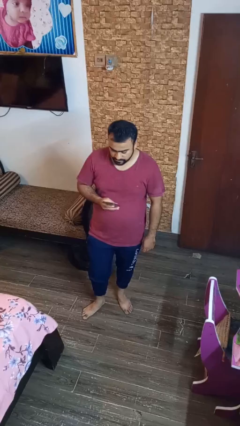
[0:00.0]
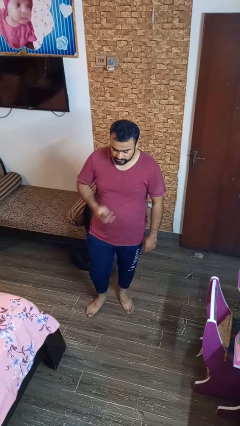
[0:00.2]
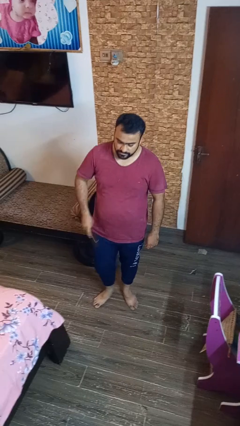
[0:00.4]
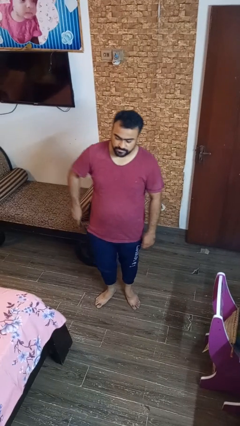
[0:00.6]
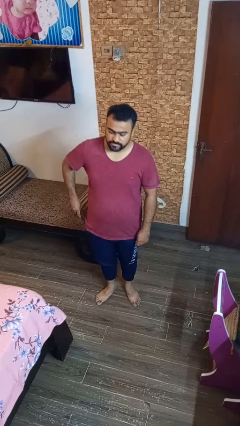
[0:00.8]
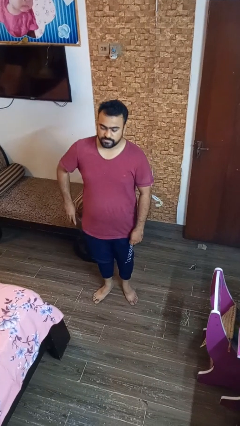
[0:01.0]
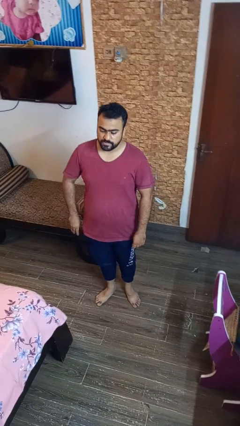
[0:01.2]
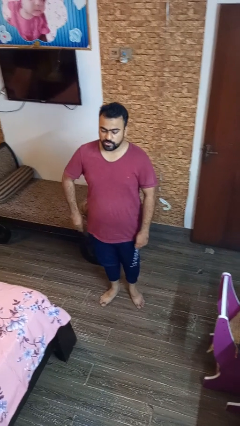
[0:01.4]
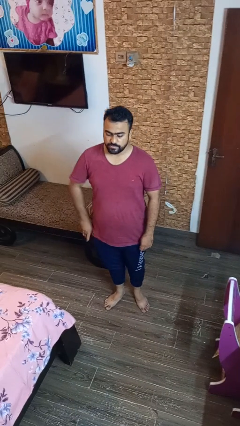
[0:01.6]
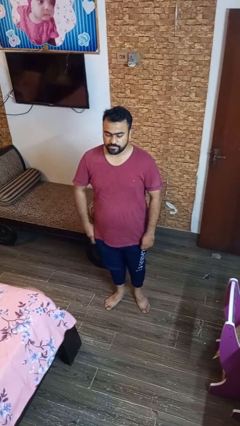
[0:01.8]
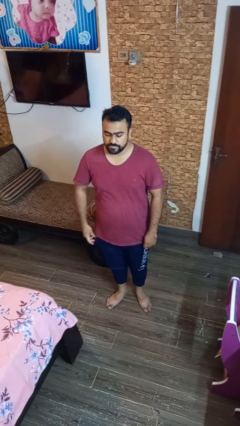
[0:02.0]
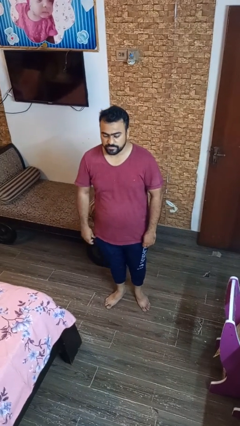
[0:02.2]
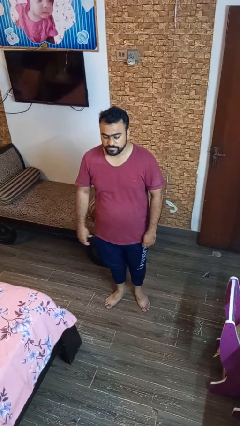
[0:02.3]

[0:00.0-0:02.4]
person puts phone into pocket

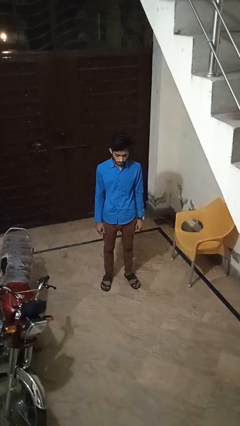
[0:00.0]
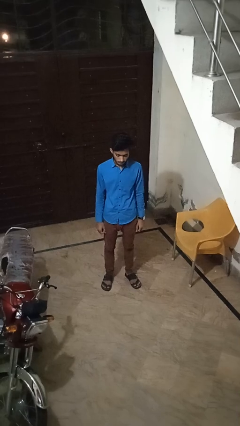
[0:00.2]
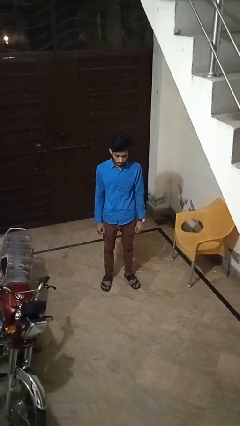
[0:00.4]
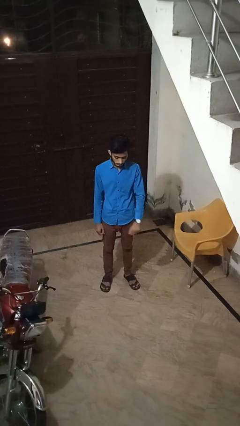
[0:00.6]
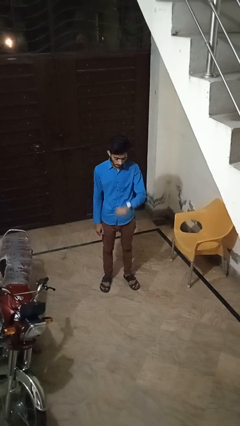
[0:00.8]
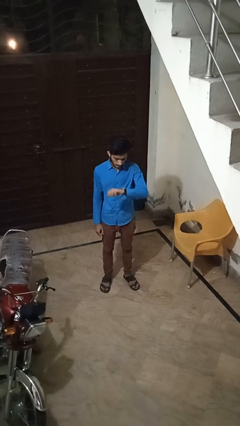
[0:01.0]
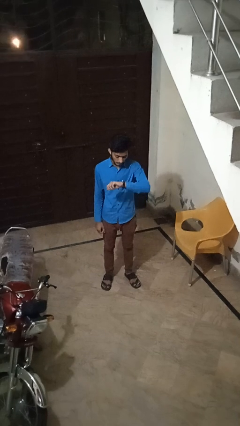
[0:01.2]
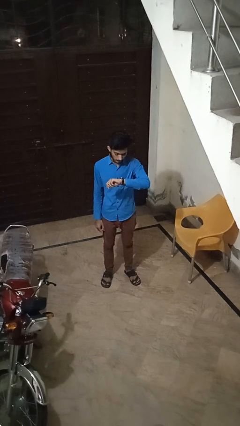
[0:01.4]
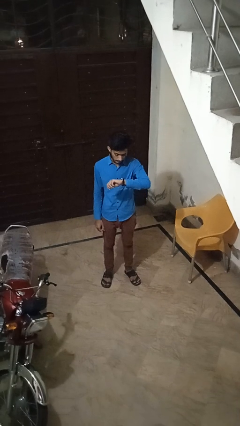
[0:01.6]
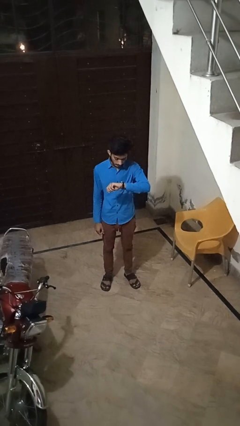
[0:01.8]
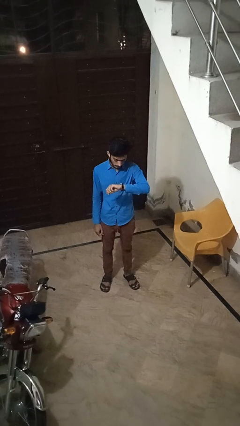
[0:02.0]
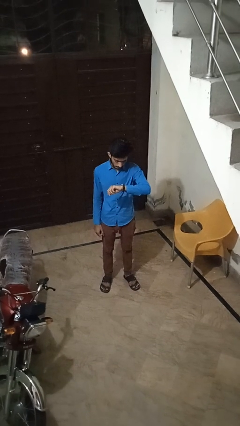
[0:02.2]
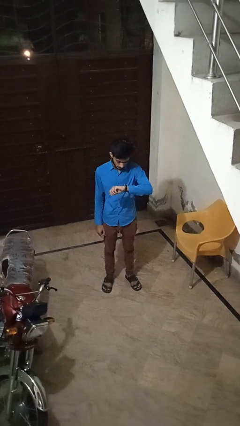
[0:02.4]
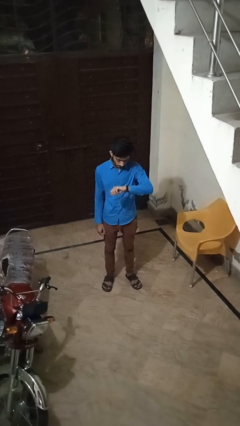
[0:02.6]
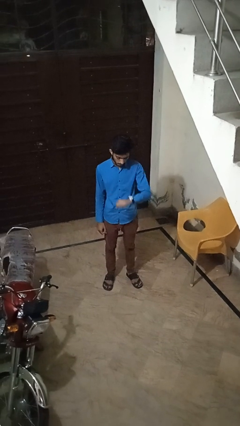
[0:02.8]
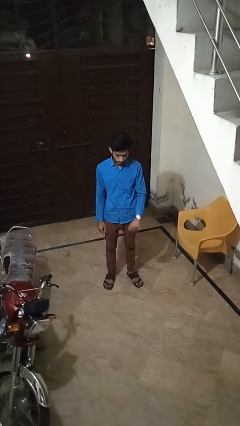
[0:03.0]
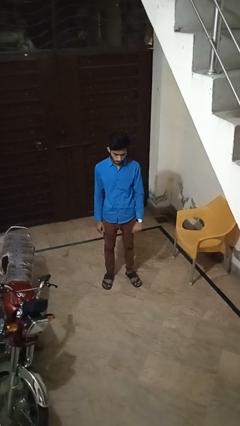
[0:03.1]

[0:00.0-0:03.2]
person looks at wristwatch

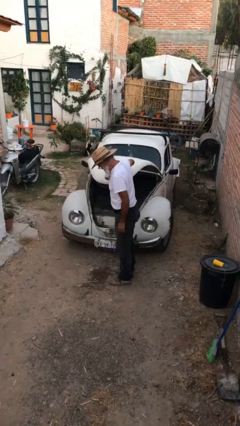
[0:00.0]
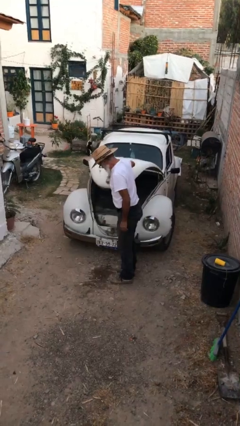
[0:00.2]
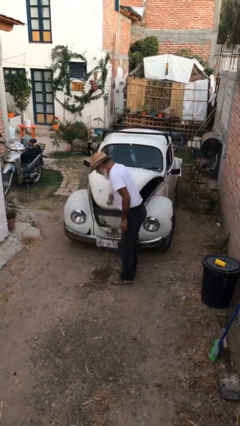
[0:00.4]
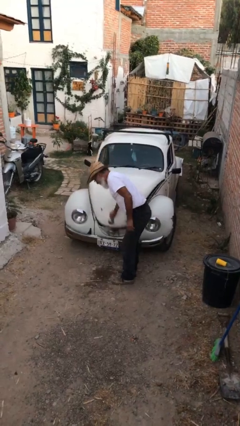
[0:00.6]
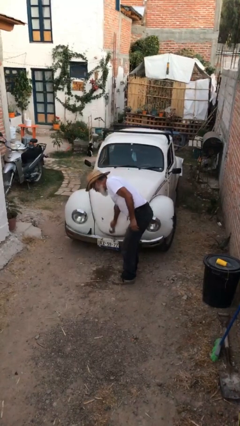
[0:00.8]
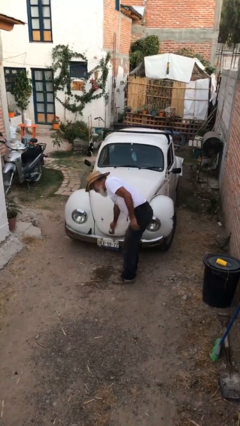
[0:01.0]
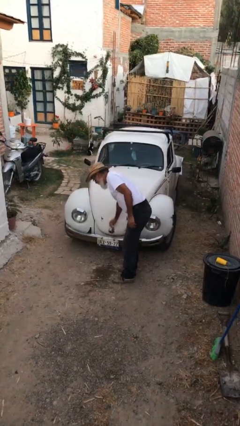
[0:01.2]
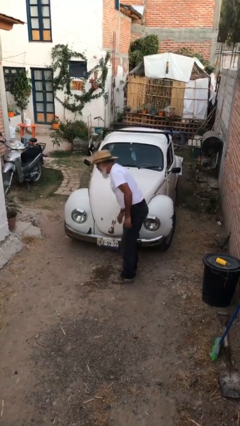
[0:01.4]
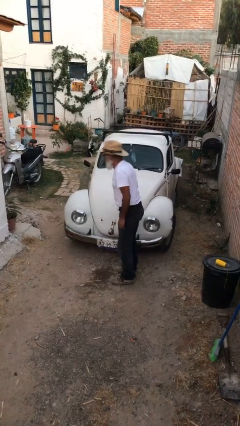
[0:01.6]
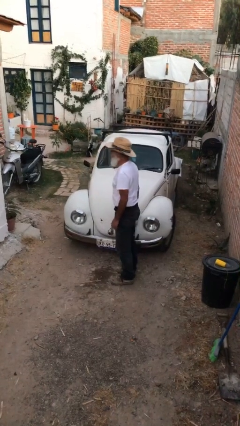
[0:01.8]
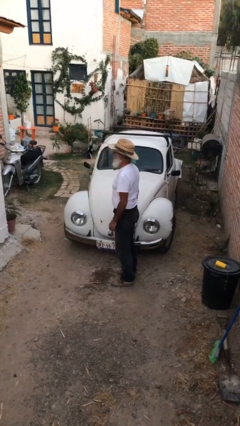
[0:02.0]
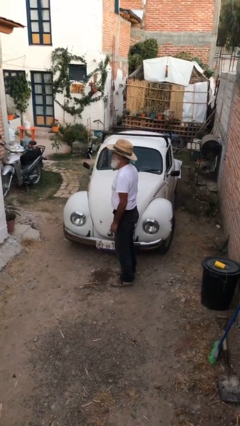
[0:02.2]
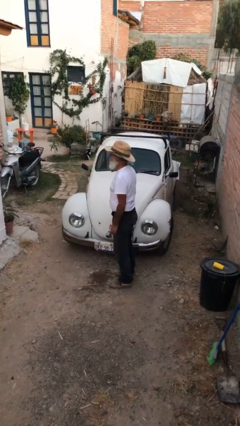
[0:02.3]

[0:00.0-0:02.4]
person closes car trunk

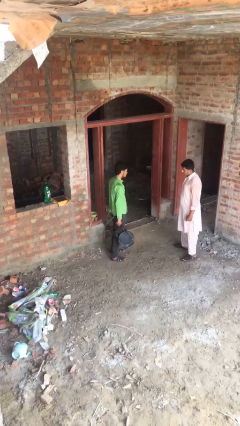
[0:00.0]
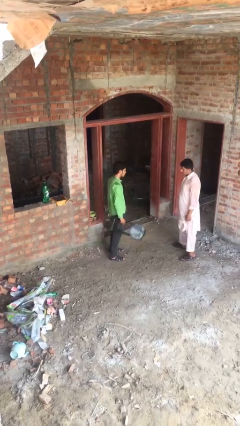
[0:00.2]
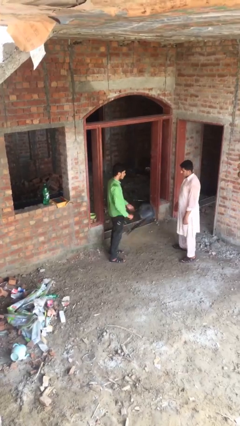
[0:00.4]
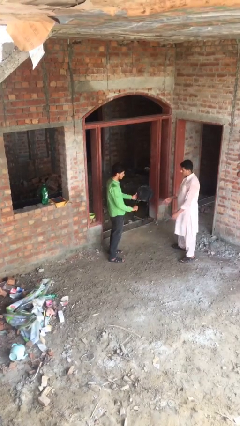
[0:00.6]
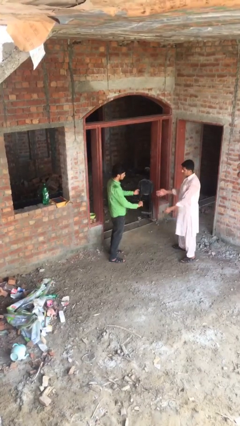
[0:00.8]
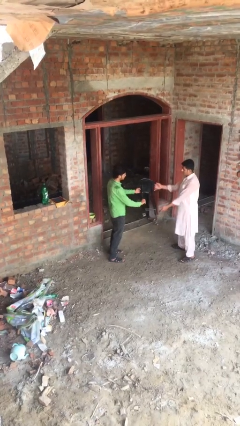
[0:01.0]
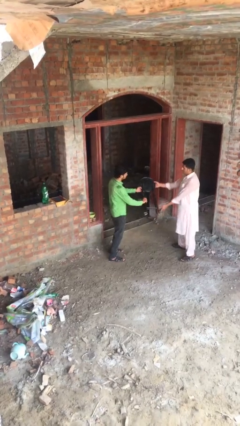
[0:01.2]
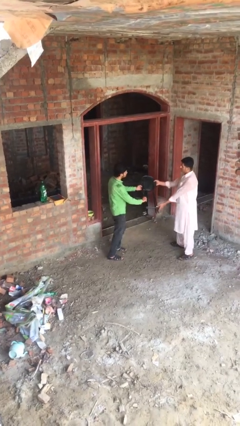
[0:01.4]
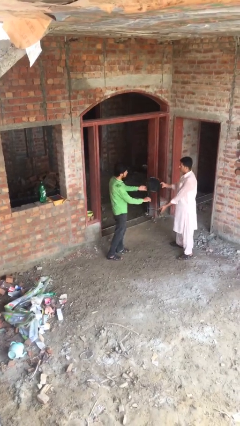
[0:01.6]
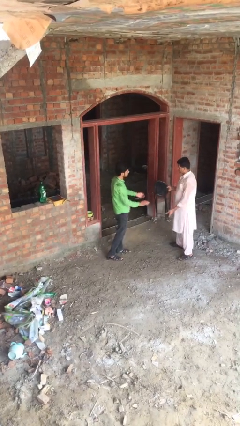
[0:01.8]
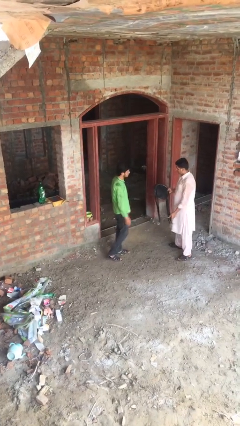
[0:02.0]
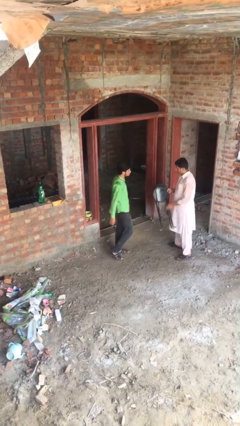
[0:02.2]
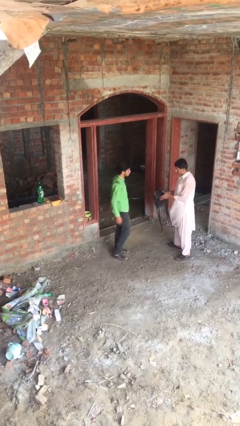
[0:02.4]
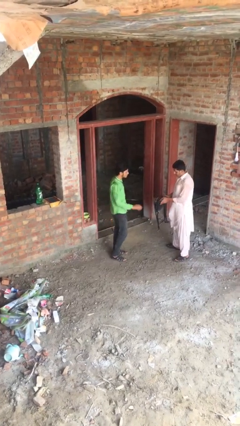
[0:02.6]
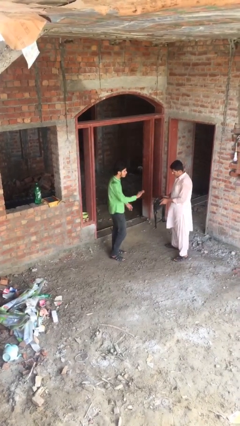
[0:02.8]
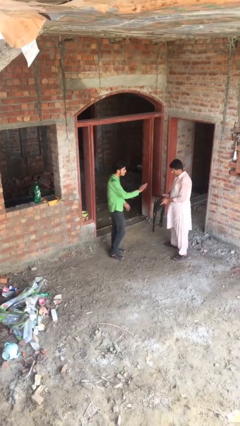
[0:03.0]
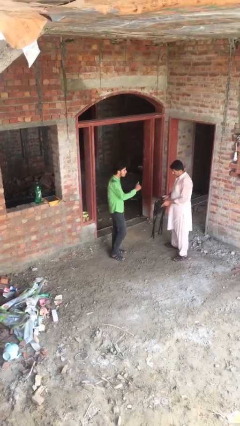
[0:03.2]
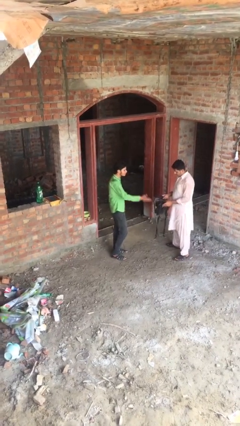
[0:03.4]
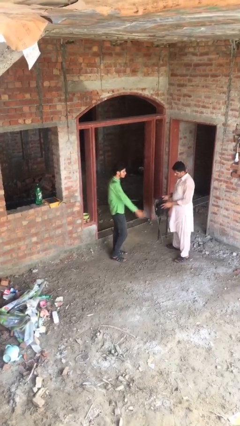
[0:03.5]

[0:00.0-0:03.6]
person transfers object to person

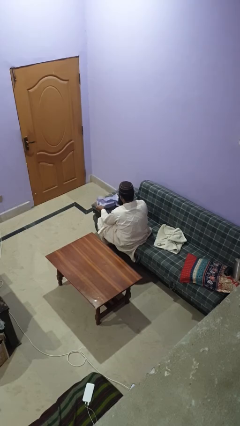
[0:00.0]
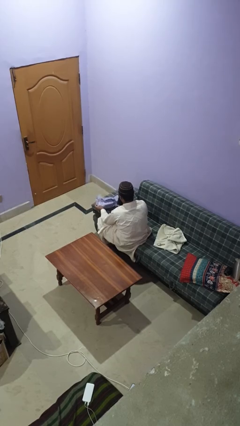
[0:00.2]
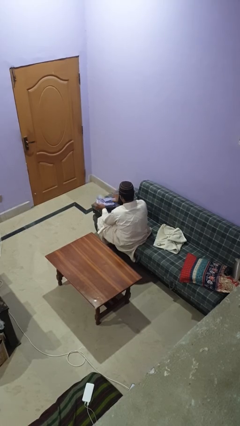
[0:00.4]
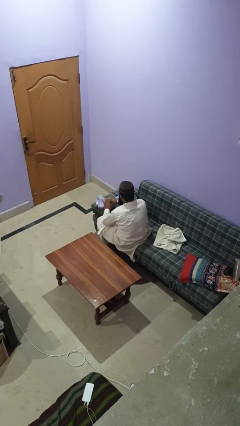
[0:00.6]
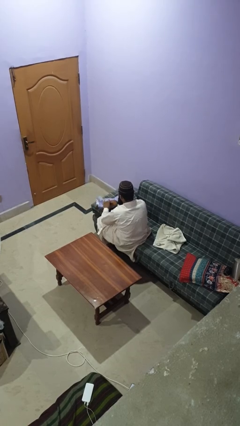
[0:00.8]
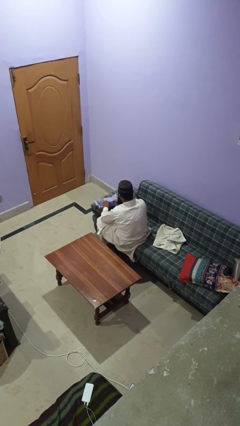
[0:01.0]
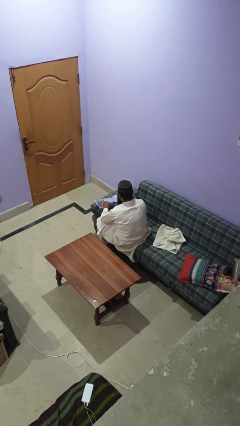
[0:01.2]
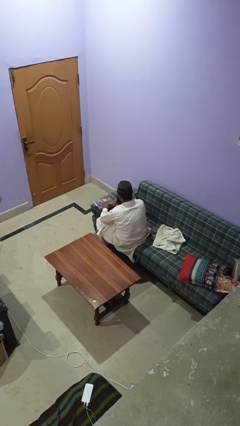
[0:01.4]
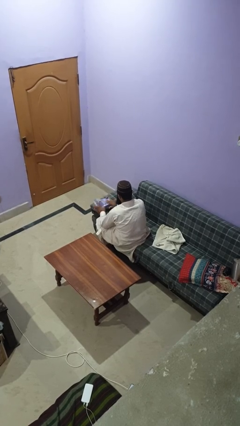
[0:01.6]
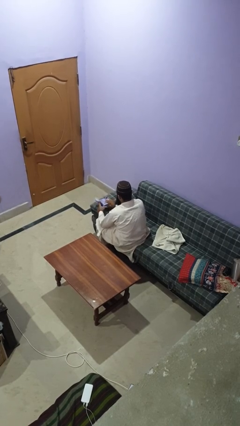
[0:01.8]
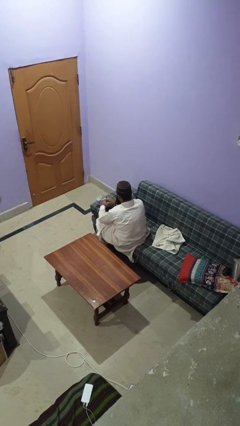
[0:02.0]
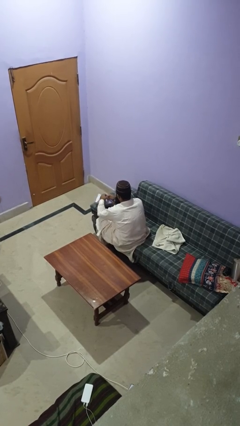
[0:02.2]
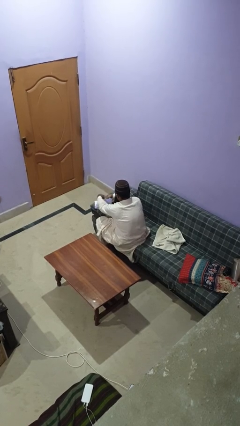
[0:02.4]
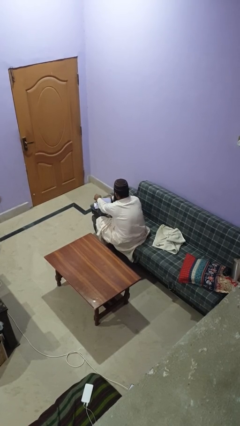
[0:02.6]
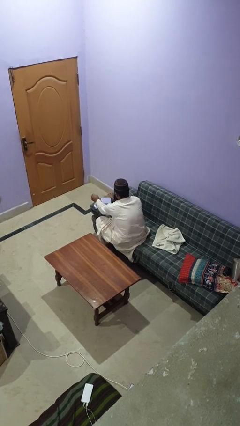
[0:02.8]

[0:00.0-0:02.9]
person wraps box

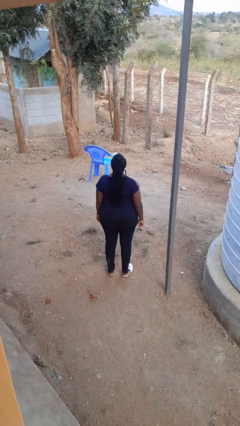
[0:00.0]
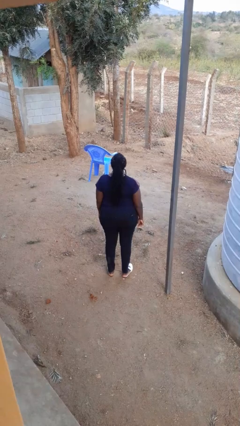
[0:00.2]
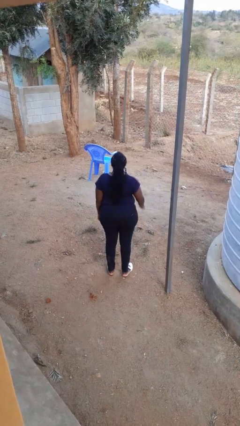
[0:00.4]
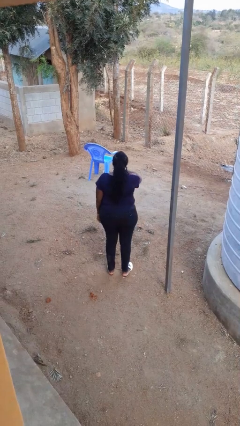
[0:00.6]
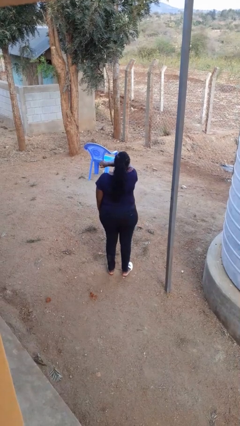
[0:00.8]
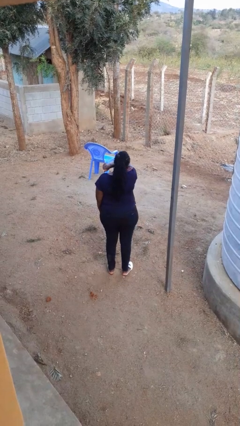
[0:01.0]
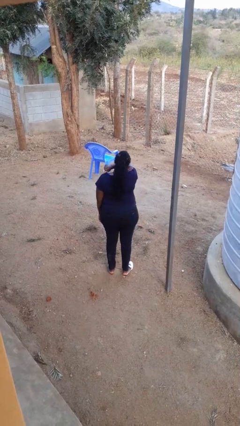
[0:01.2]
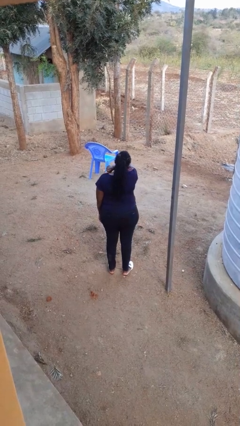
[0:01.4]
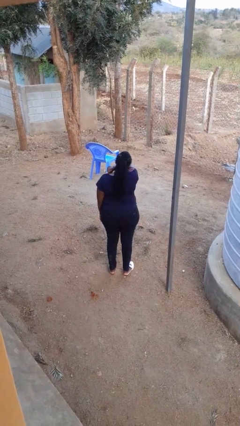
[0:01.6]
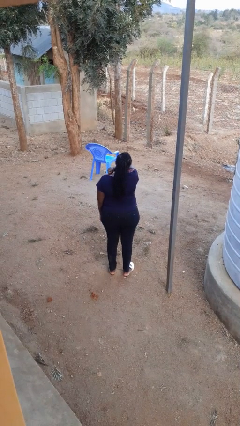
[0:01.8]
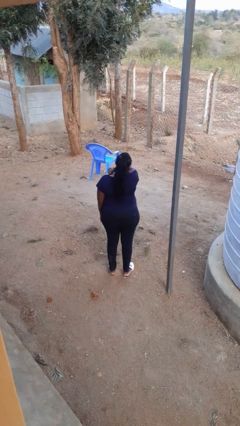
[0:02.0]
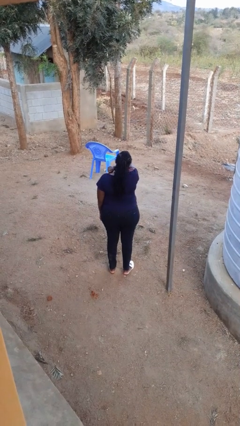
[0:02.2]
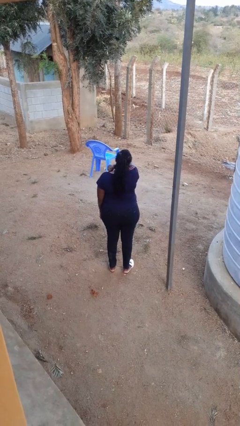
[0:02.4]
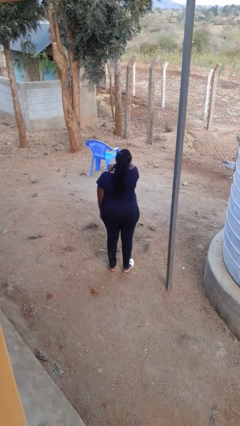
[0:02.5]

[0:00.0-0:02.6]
person sneezes into arm
